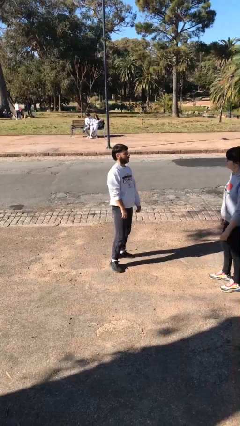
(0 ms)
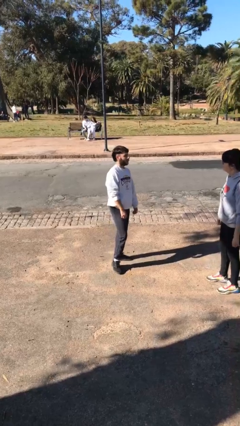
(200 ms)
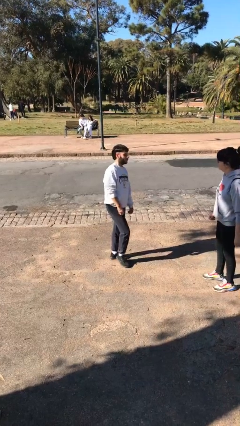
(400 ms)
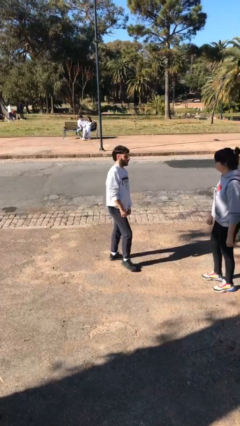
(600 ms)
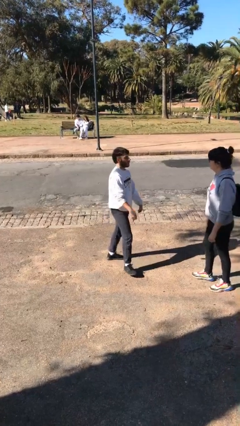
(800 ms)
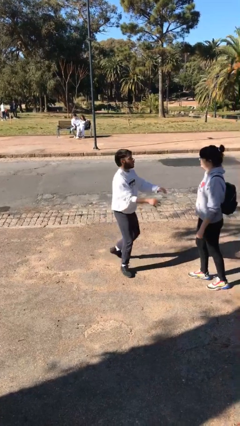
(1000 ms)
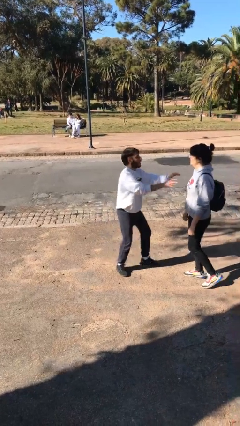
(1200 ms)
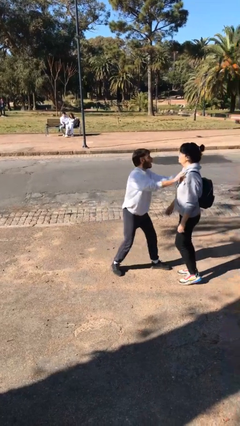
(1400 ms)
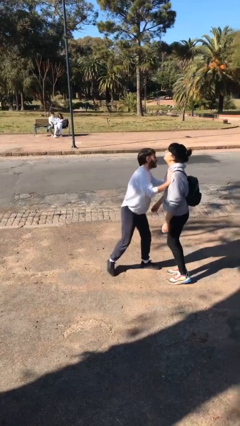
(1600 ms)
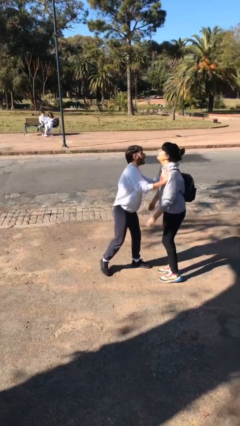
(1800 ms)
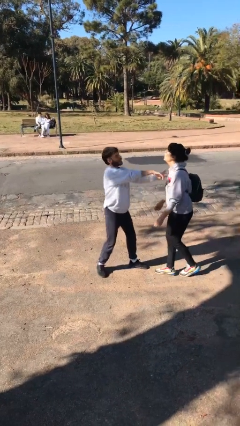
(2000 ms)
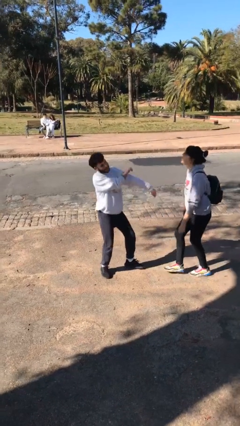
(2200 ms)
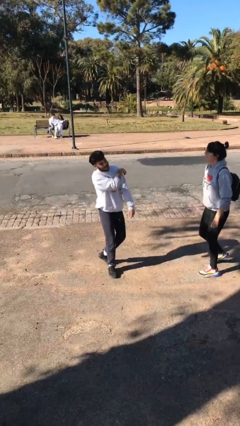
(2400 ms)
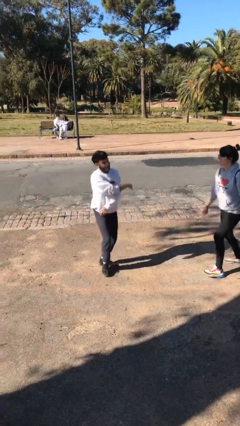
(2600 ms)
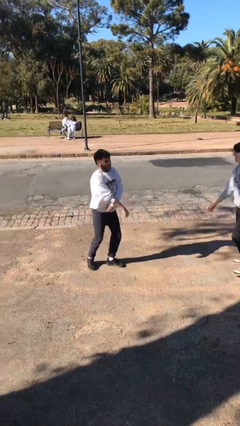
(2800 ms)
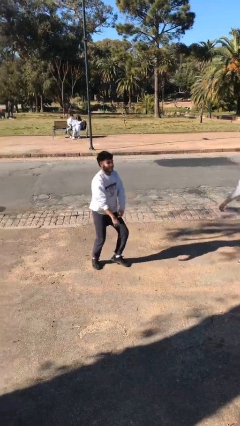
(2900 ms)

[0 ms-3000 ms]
person shoves person

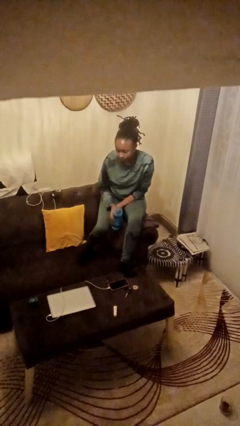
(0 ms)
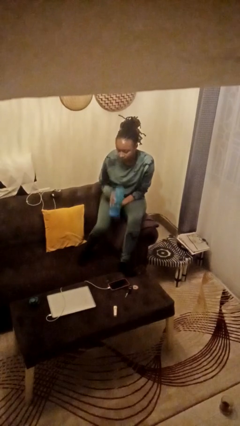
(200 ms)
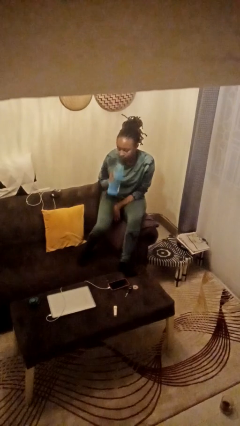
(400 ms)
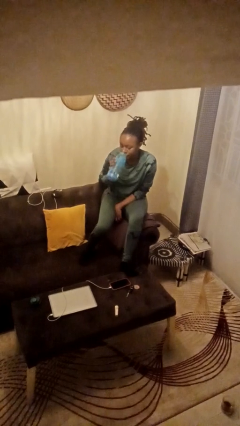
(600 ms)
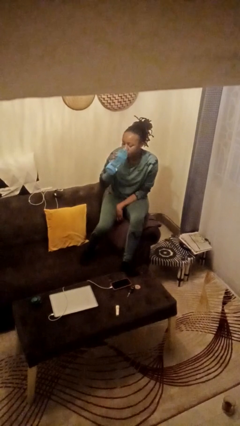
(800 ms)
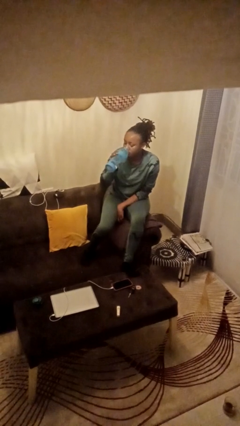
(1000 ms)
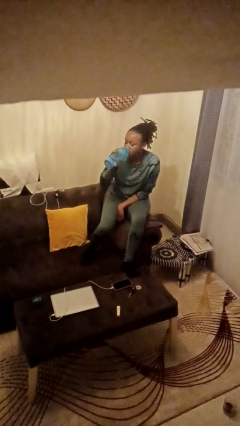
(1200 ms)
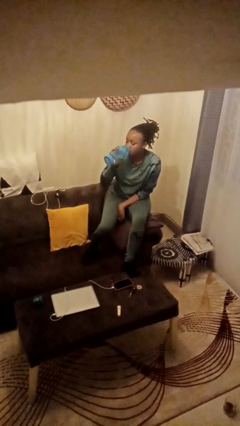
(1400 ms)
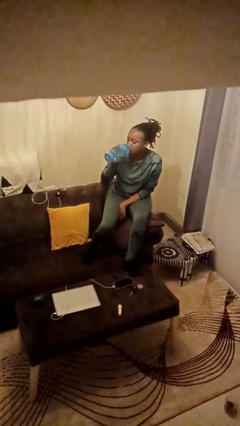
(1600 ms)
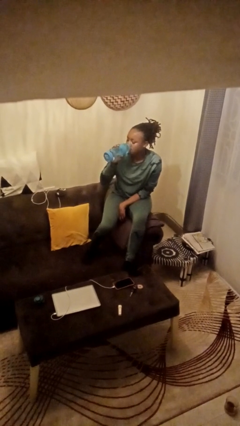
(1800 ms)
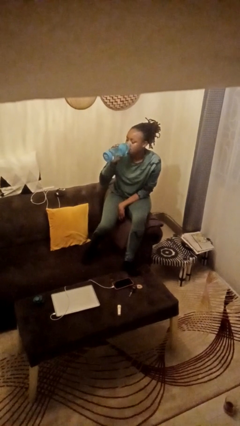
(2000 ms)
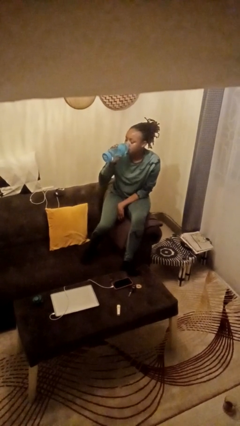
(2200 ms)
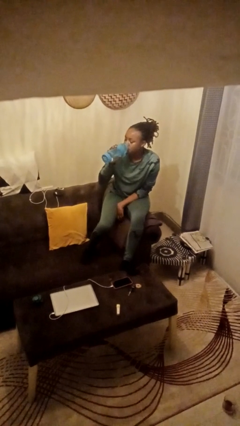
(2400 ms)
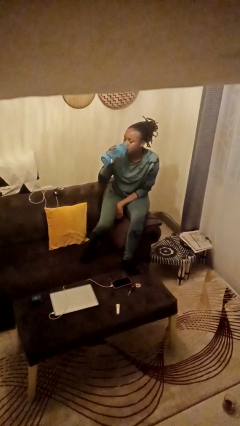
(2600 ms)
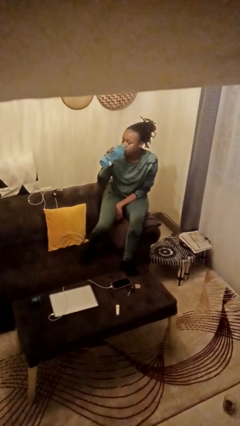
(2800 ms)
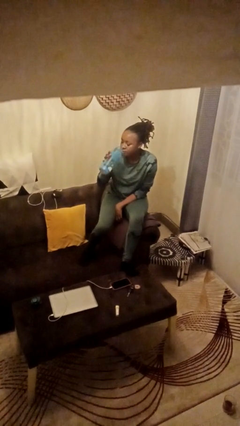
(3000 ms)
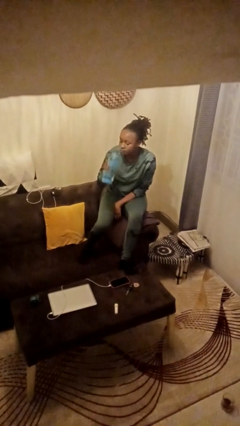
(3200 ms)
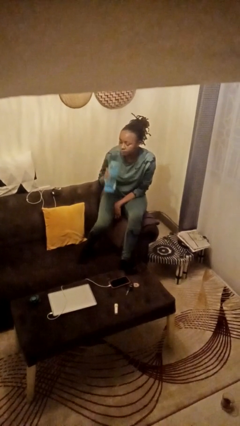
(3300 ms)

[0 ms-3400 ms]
person drinks from bottle

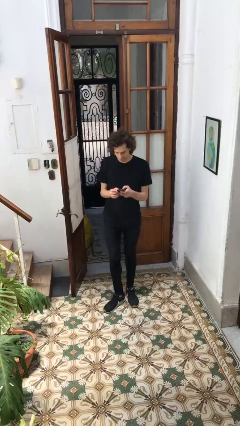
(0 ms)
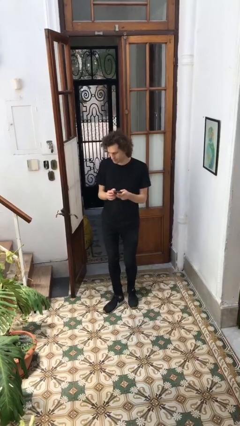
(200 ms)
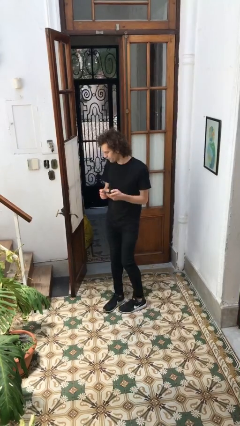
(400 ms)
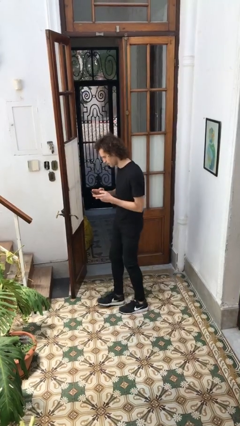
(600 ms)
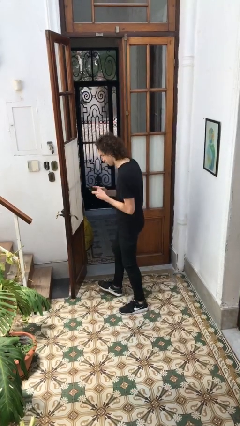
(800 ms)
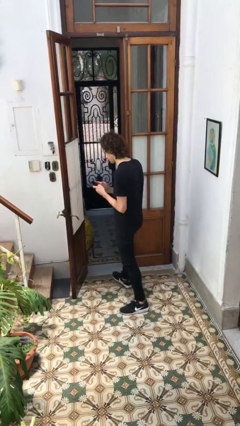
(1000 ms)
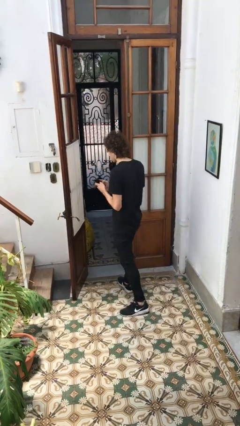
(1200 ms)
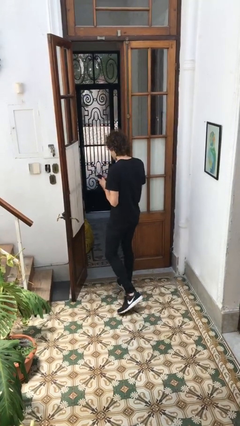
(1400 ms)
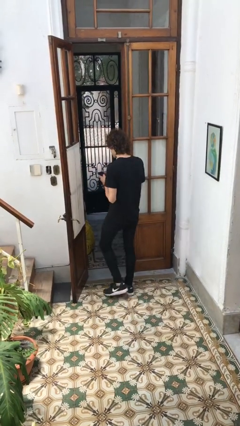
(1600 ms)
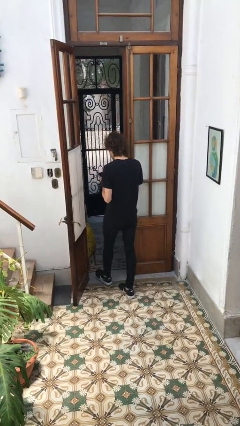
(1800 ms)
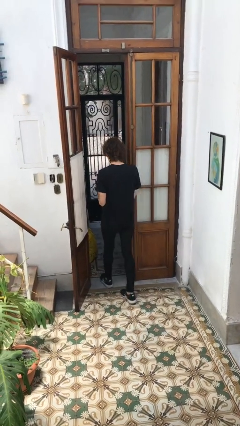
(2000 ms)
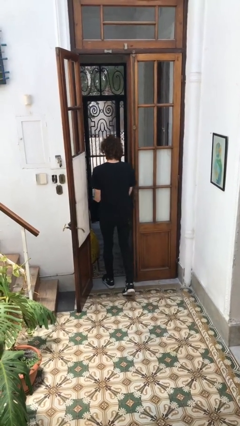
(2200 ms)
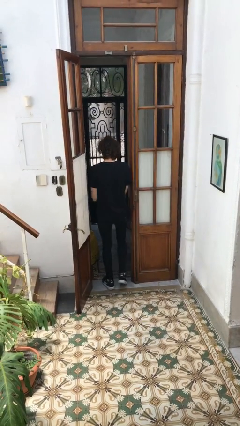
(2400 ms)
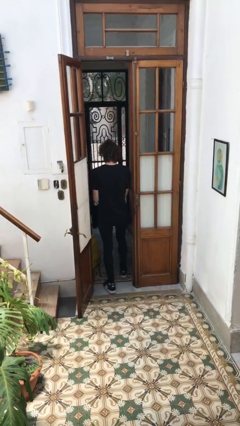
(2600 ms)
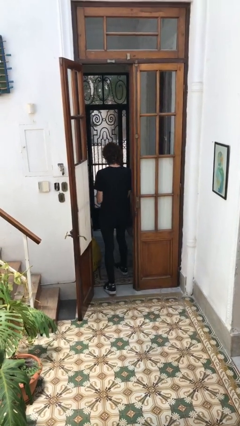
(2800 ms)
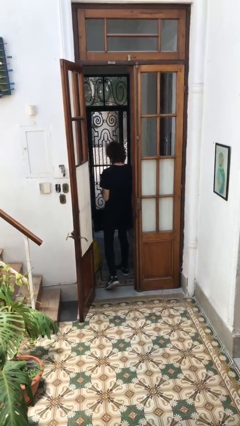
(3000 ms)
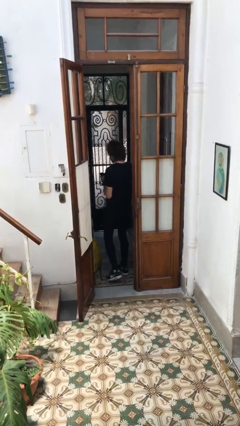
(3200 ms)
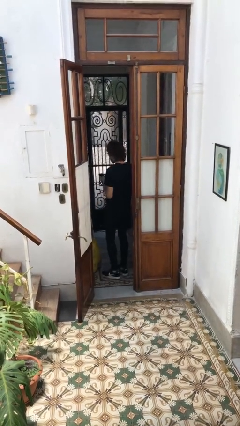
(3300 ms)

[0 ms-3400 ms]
person exits scene through structure

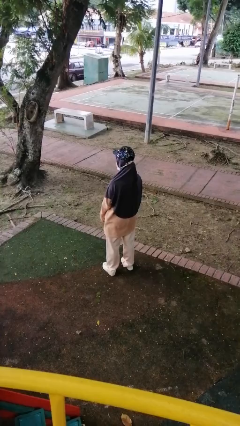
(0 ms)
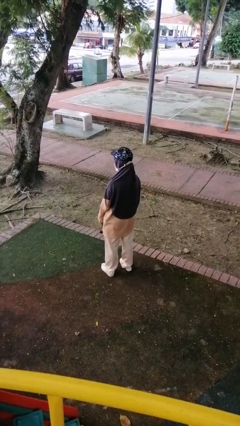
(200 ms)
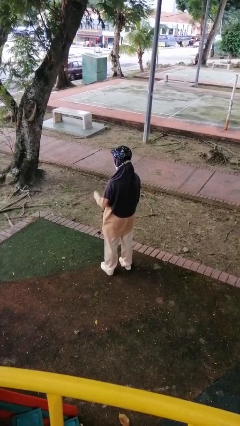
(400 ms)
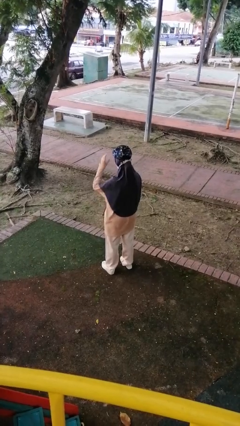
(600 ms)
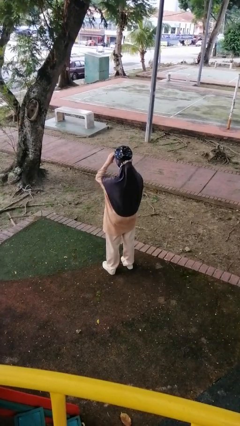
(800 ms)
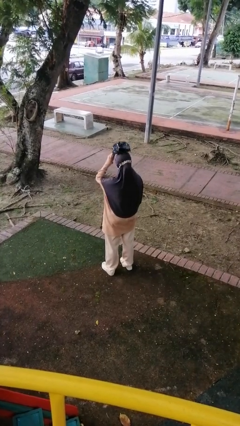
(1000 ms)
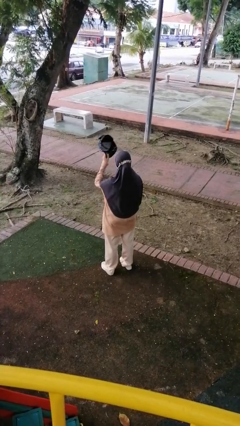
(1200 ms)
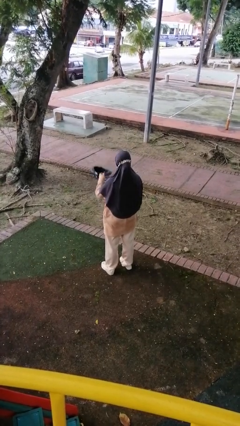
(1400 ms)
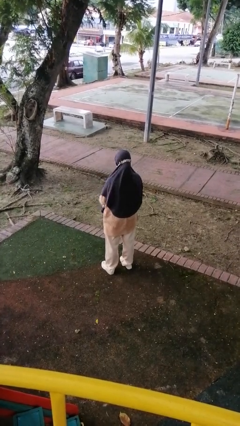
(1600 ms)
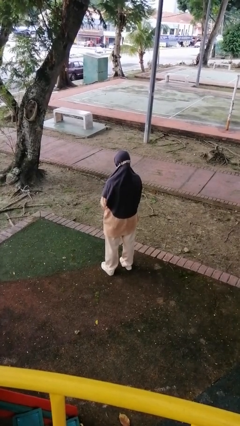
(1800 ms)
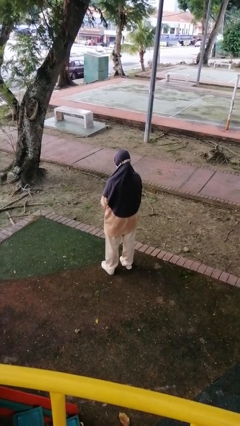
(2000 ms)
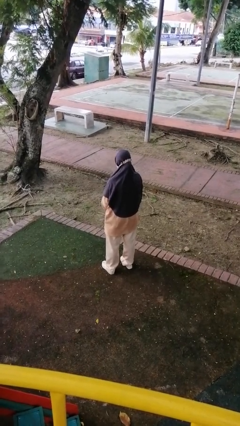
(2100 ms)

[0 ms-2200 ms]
person takes off hat

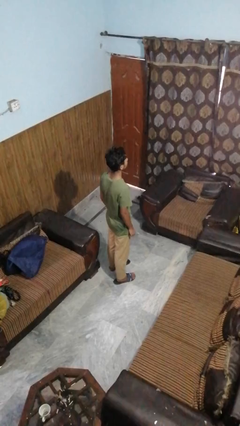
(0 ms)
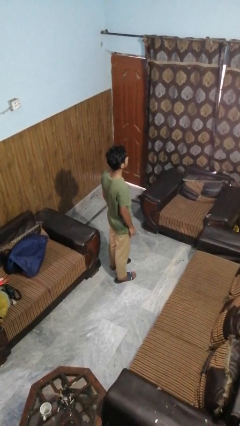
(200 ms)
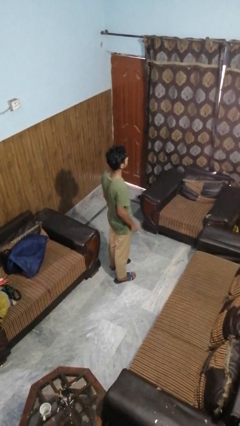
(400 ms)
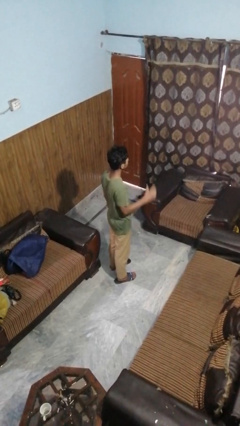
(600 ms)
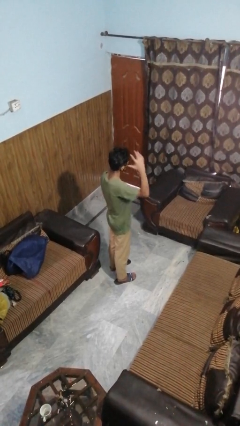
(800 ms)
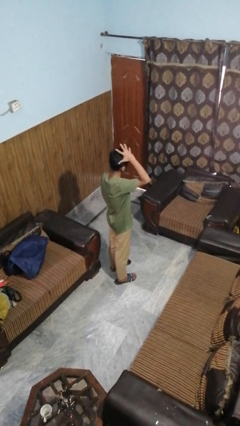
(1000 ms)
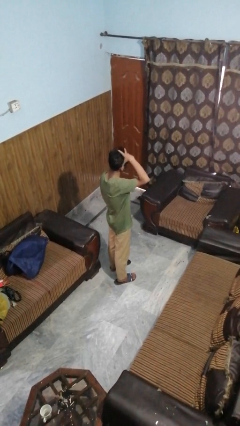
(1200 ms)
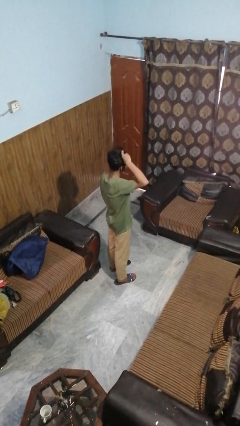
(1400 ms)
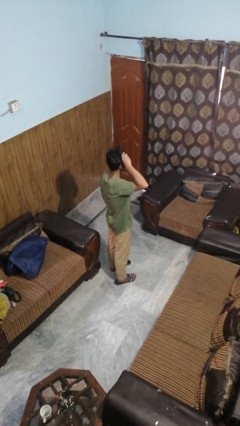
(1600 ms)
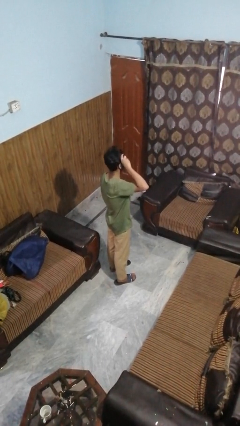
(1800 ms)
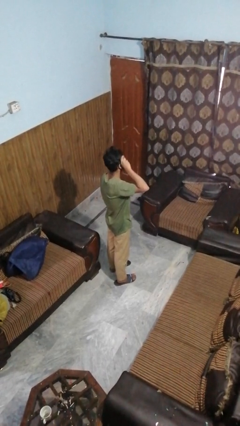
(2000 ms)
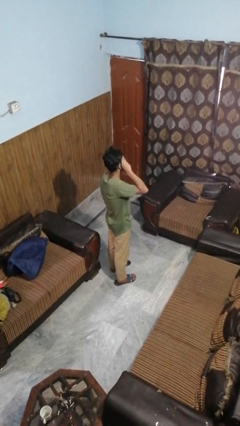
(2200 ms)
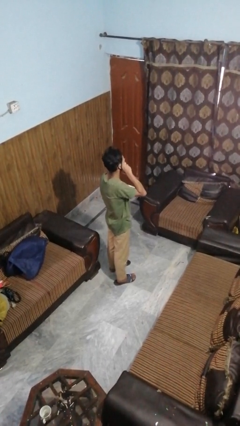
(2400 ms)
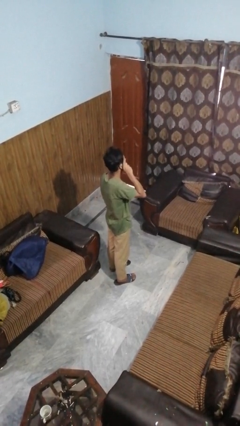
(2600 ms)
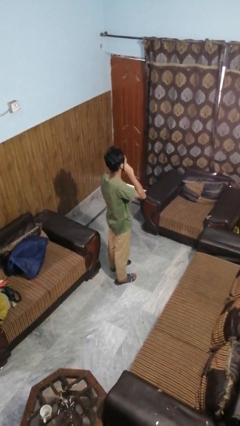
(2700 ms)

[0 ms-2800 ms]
person strokes hair

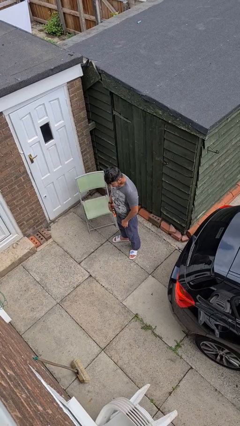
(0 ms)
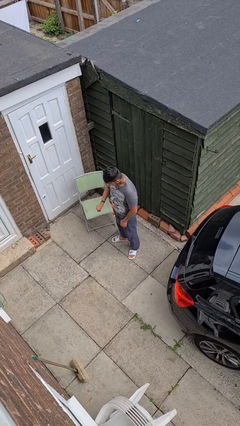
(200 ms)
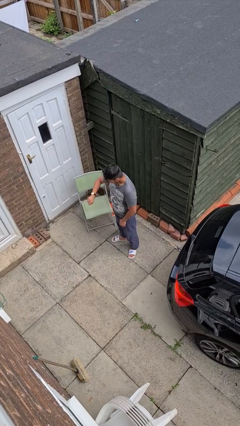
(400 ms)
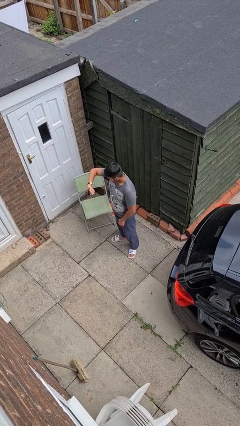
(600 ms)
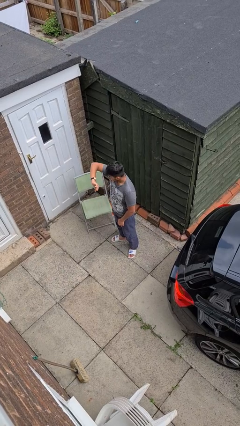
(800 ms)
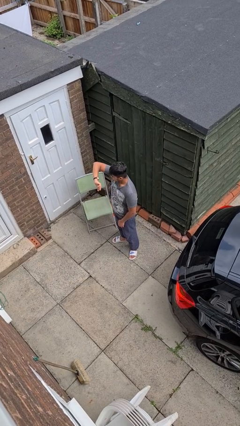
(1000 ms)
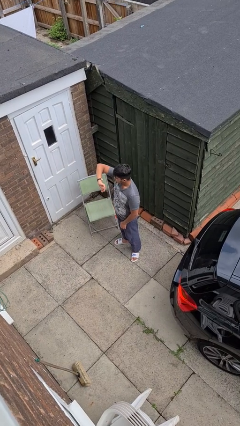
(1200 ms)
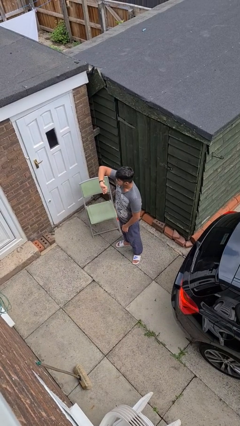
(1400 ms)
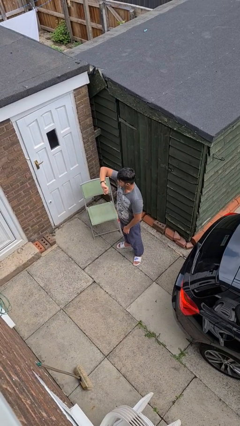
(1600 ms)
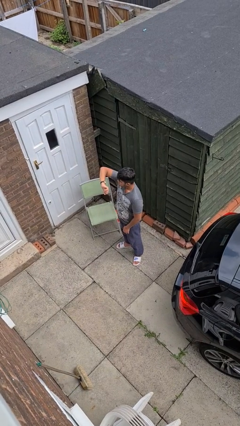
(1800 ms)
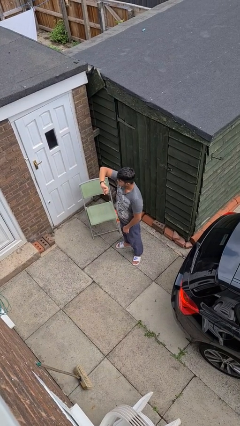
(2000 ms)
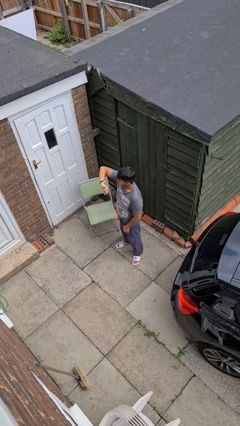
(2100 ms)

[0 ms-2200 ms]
person looks at wristwatch

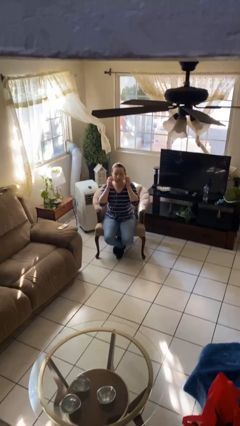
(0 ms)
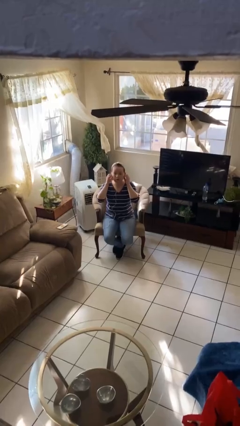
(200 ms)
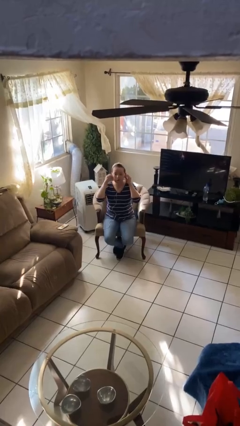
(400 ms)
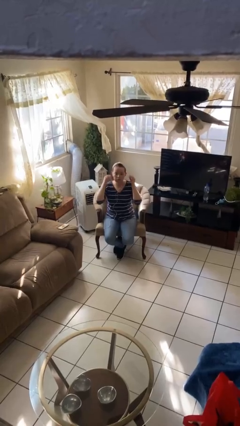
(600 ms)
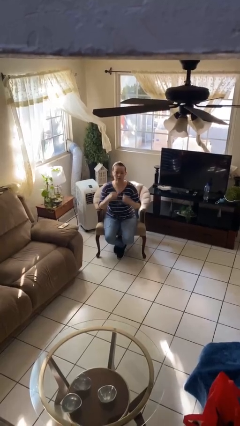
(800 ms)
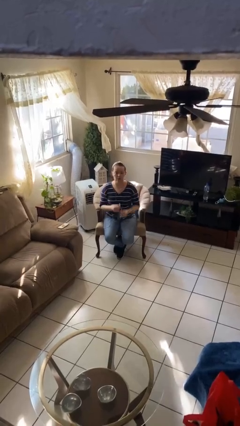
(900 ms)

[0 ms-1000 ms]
person takes off headphones
